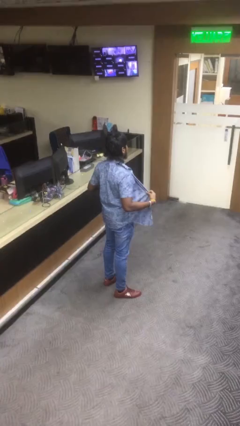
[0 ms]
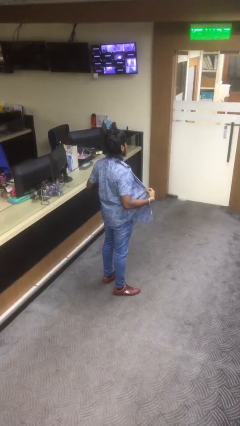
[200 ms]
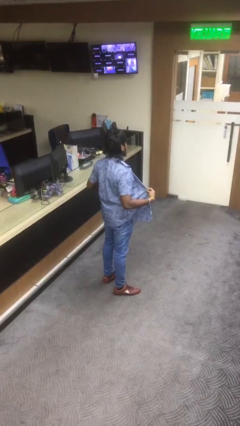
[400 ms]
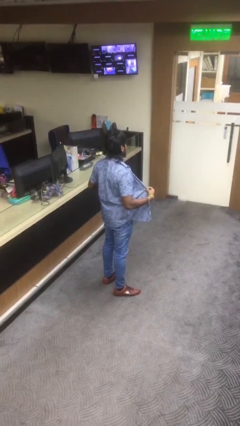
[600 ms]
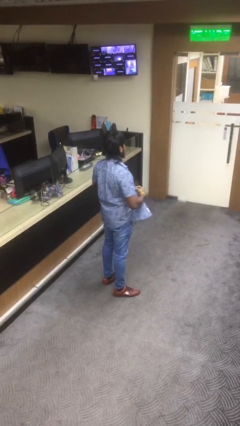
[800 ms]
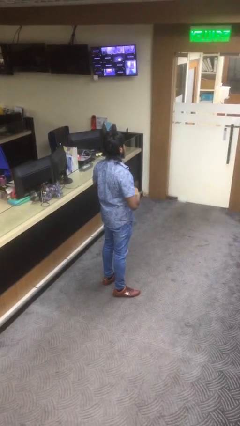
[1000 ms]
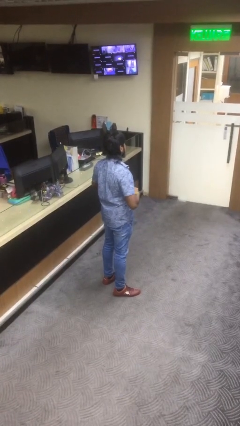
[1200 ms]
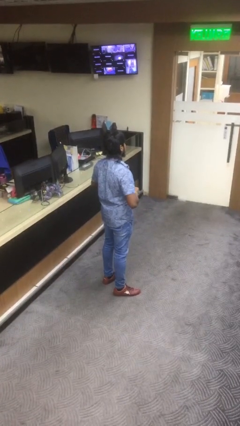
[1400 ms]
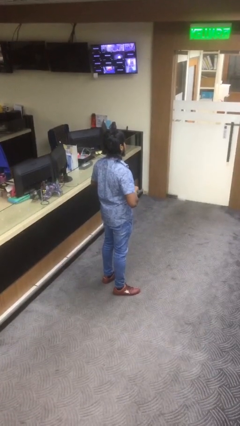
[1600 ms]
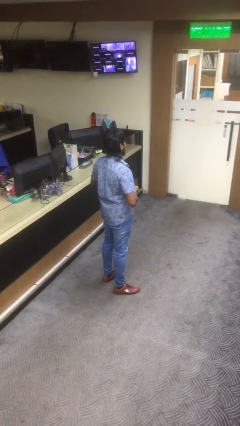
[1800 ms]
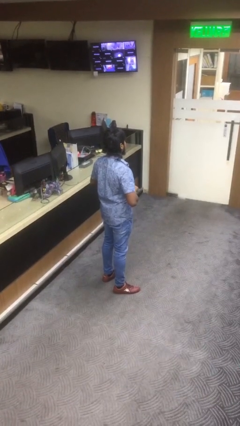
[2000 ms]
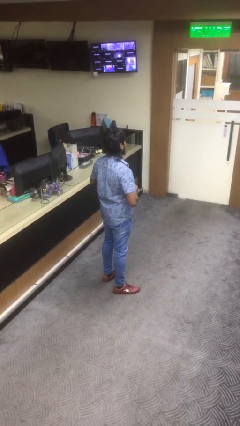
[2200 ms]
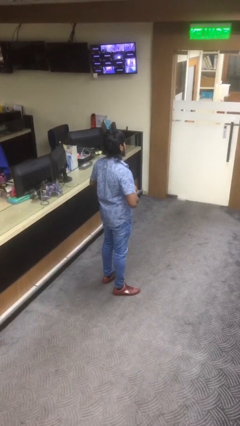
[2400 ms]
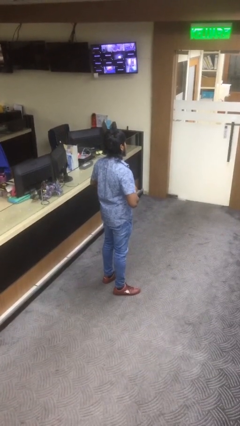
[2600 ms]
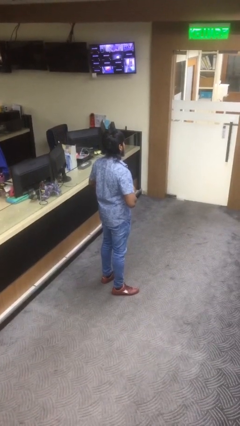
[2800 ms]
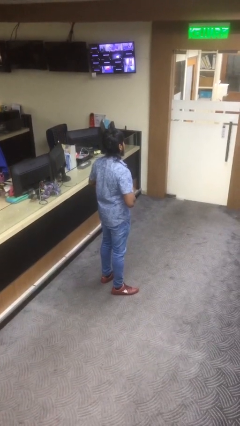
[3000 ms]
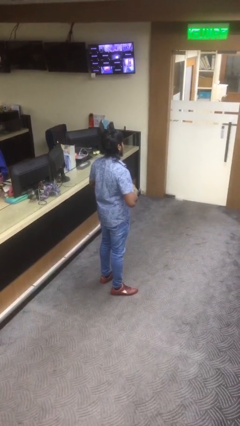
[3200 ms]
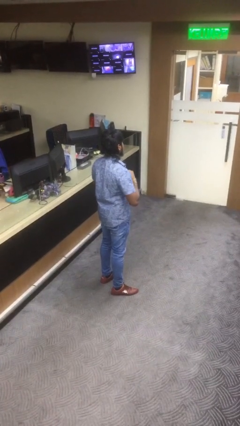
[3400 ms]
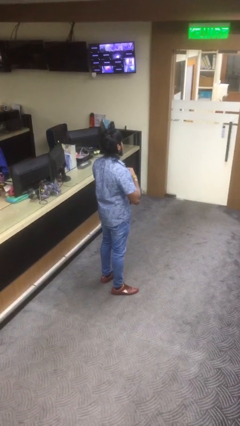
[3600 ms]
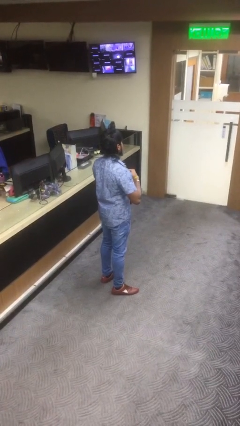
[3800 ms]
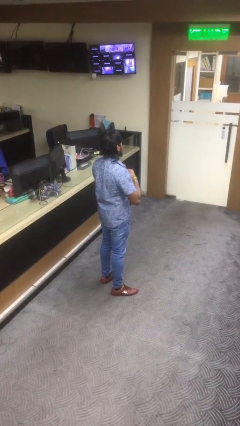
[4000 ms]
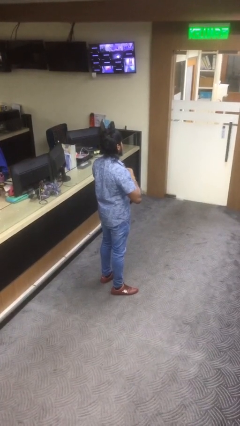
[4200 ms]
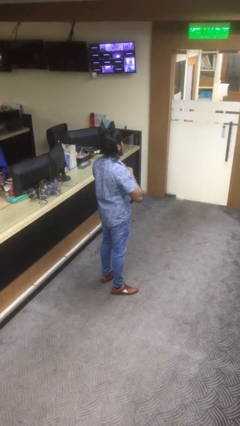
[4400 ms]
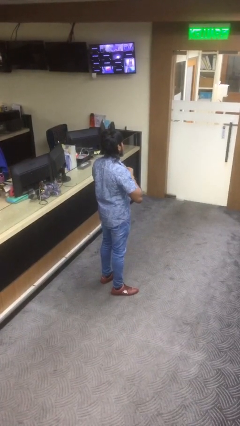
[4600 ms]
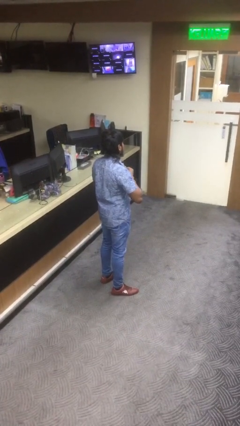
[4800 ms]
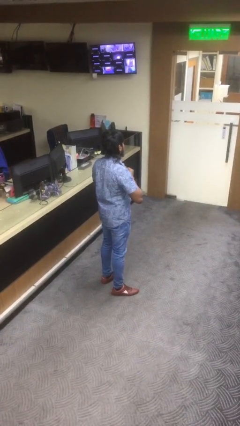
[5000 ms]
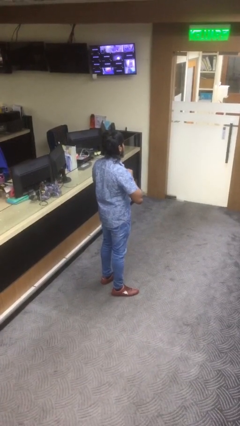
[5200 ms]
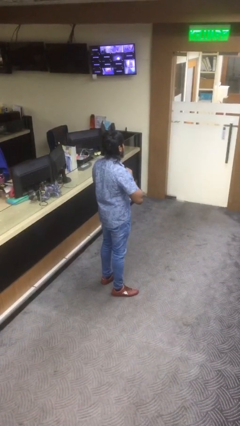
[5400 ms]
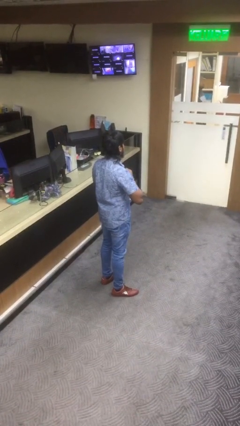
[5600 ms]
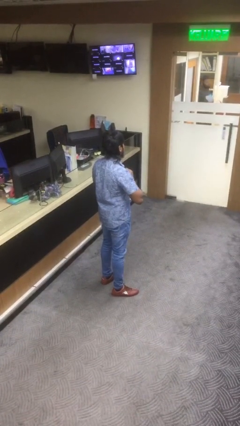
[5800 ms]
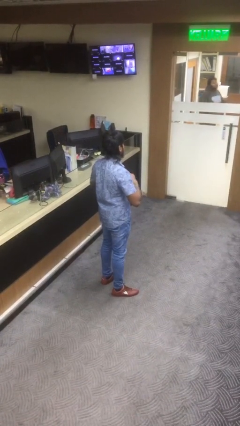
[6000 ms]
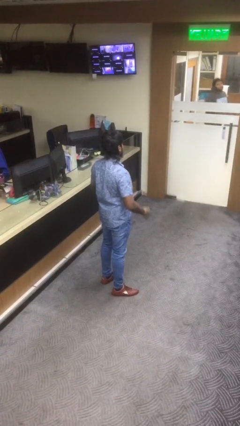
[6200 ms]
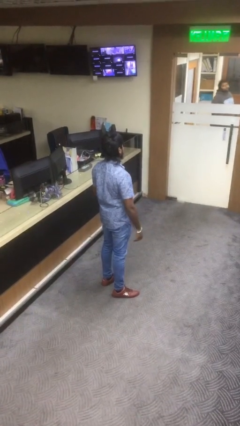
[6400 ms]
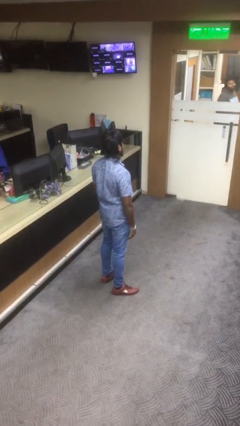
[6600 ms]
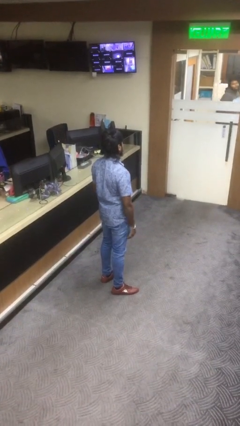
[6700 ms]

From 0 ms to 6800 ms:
person buttons shirt

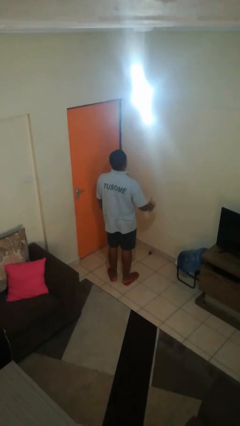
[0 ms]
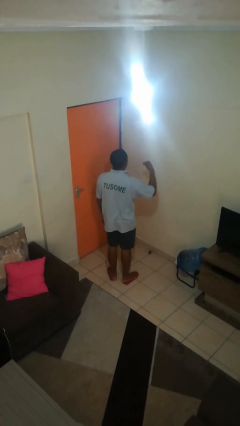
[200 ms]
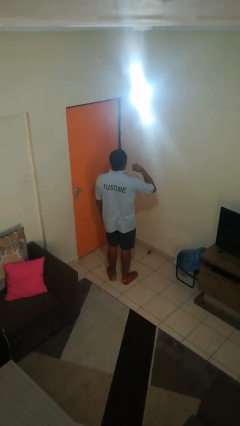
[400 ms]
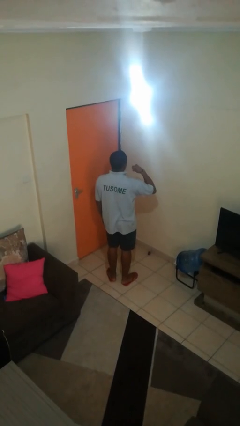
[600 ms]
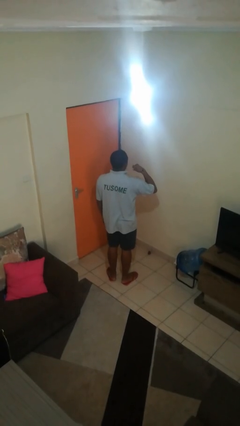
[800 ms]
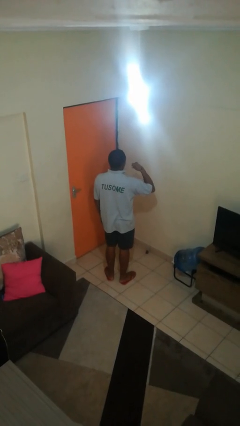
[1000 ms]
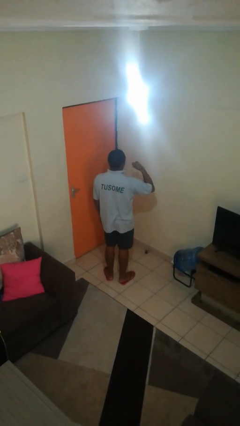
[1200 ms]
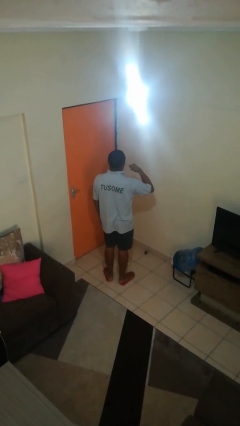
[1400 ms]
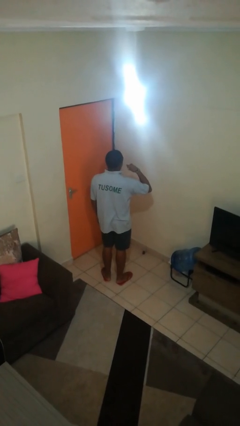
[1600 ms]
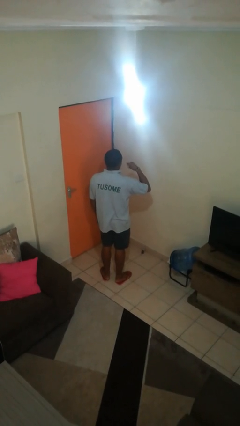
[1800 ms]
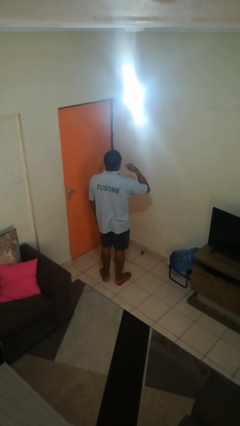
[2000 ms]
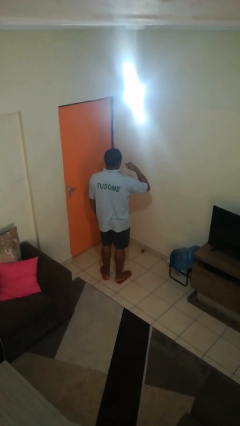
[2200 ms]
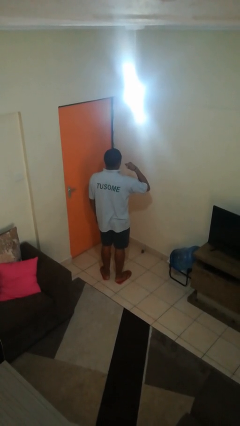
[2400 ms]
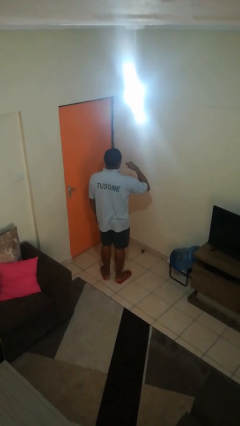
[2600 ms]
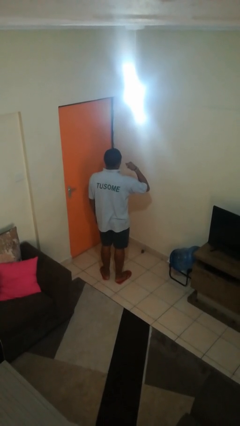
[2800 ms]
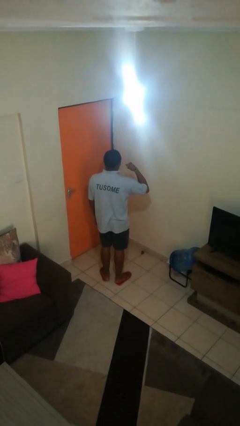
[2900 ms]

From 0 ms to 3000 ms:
person gestures call me

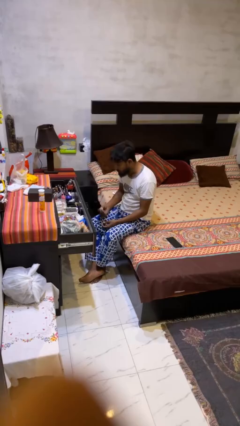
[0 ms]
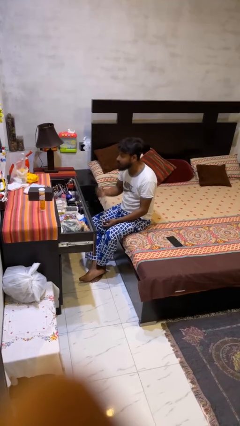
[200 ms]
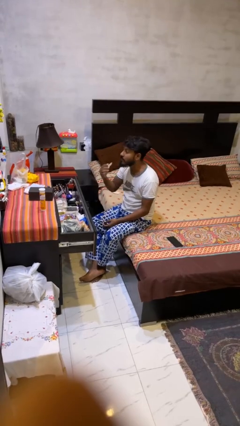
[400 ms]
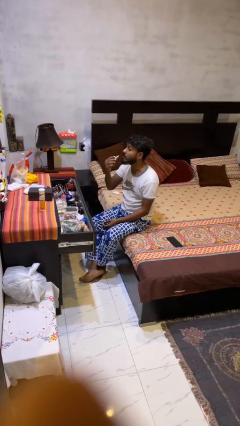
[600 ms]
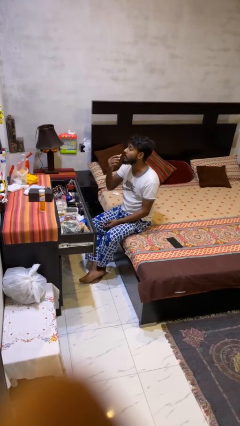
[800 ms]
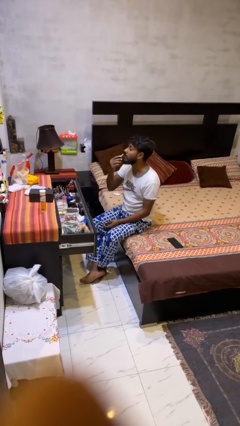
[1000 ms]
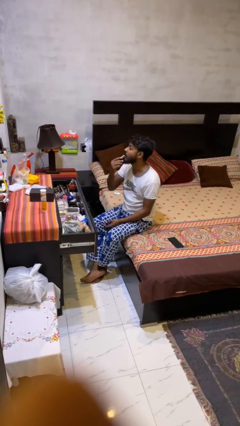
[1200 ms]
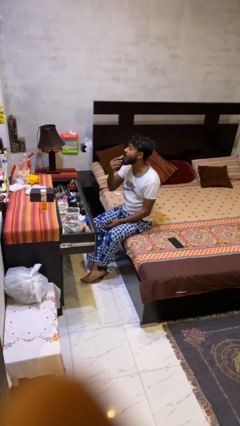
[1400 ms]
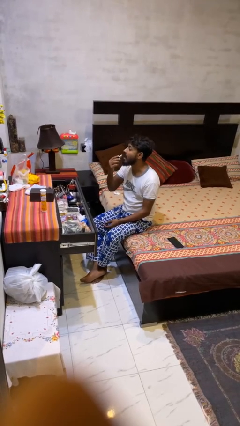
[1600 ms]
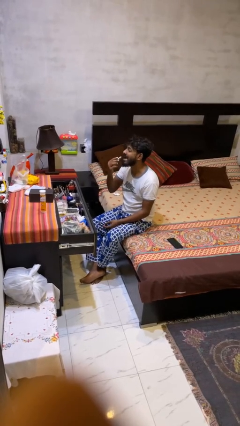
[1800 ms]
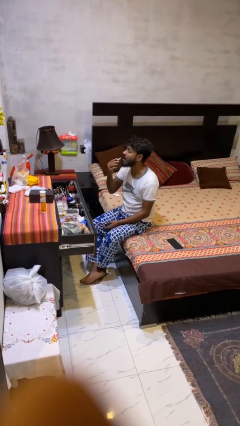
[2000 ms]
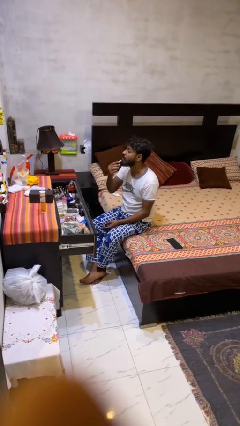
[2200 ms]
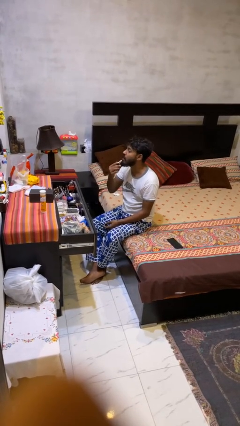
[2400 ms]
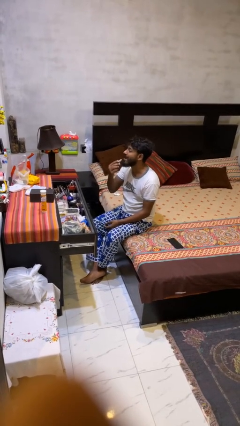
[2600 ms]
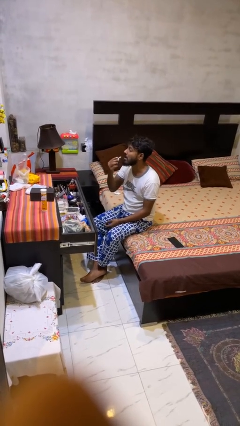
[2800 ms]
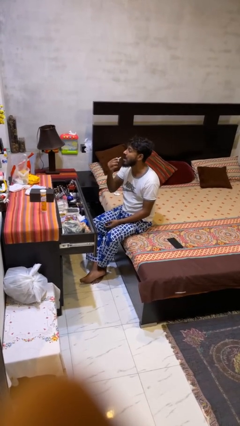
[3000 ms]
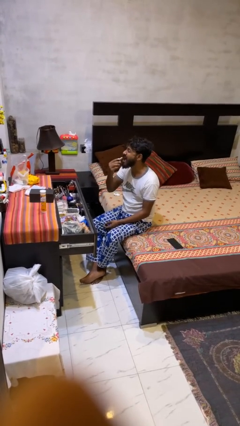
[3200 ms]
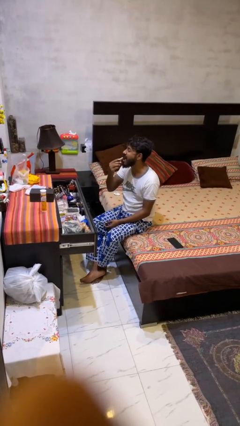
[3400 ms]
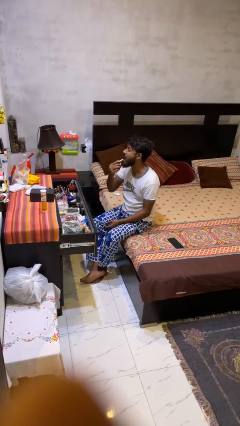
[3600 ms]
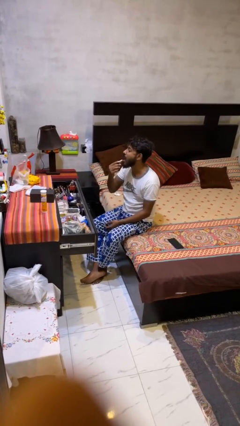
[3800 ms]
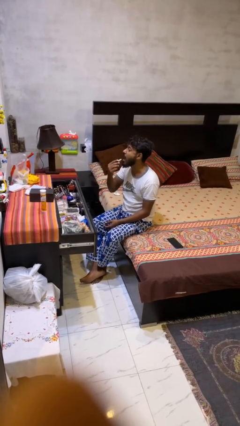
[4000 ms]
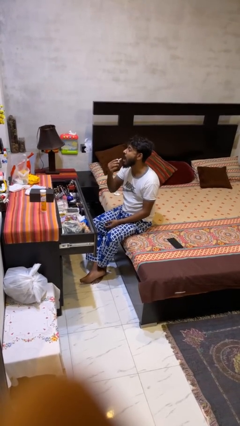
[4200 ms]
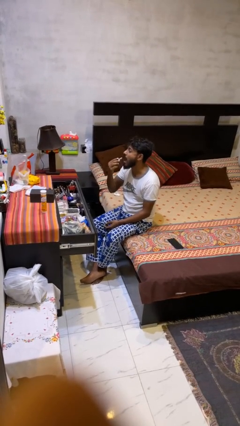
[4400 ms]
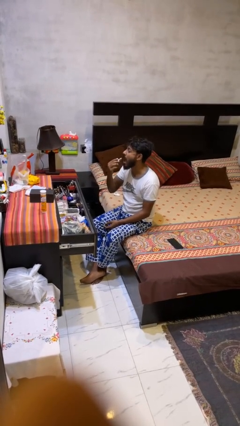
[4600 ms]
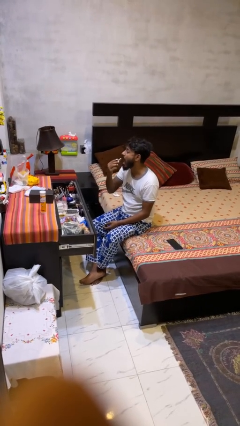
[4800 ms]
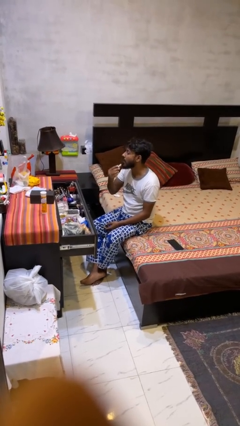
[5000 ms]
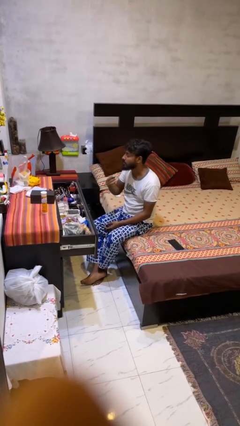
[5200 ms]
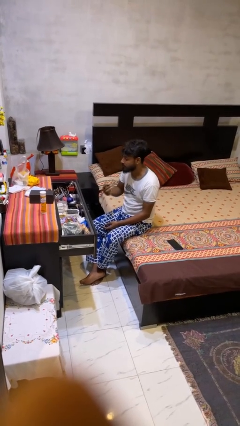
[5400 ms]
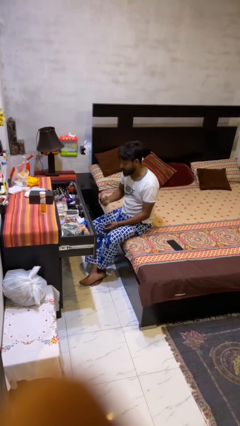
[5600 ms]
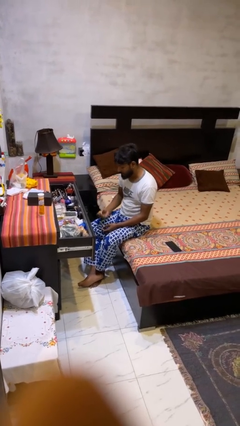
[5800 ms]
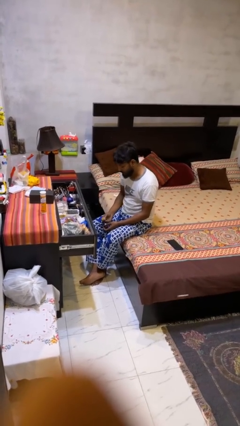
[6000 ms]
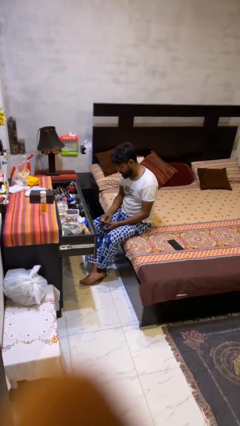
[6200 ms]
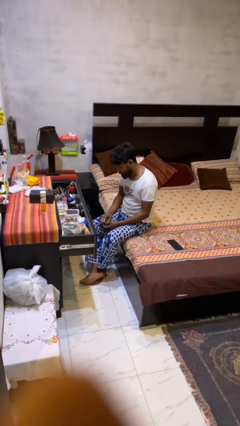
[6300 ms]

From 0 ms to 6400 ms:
person applies lip makeup

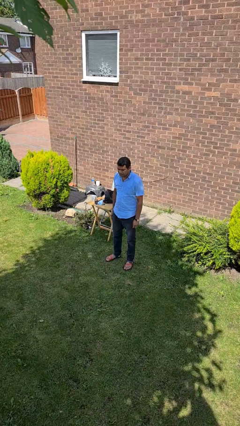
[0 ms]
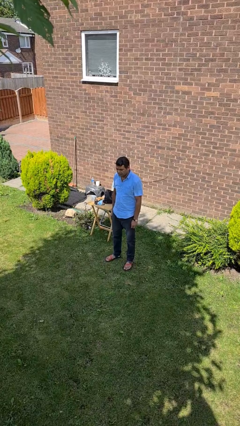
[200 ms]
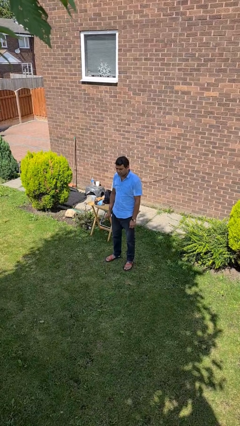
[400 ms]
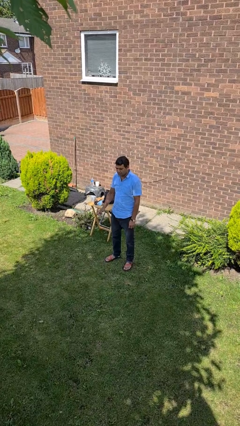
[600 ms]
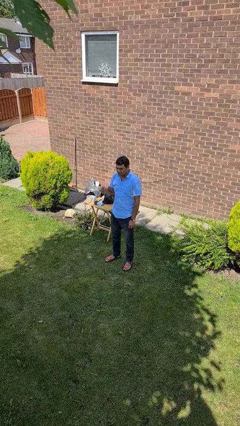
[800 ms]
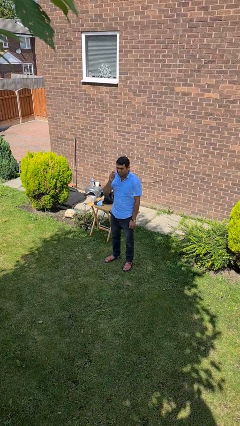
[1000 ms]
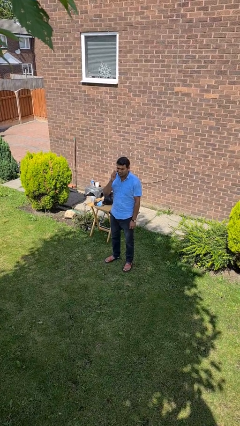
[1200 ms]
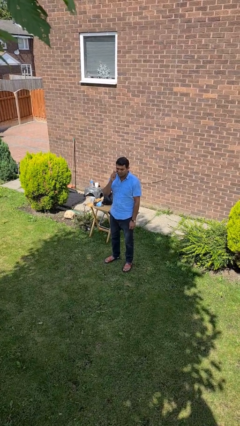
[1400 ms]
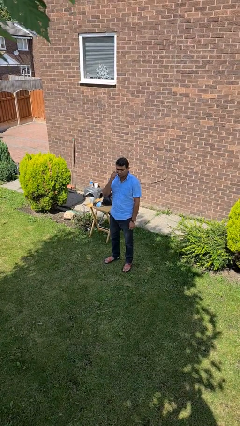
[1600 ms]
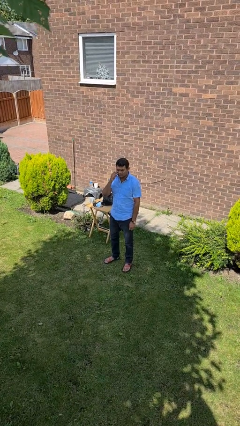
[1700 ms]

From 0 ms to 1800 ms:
person flosses
